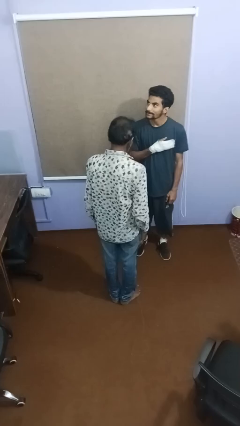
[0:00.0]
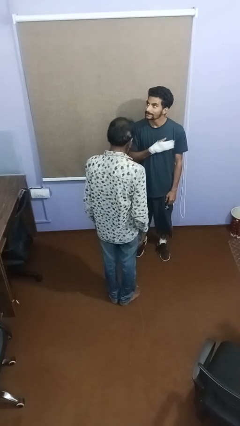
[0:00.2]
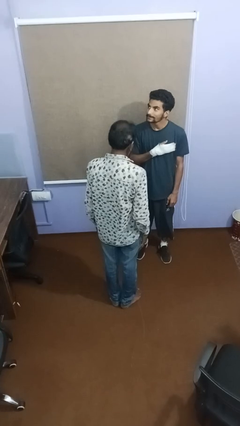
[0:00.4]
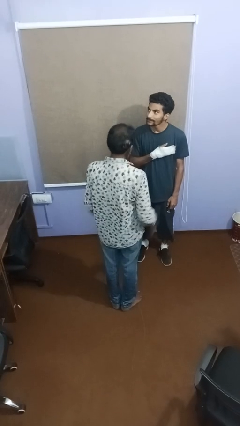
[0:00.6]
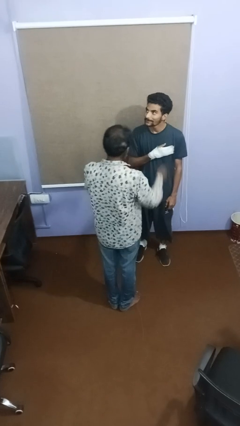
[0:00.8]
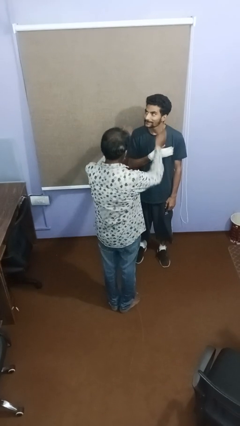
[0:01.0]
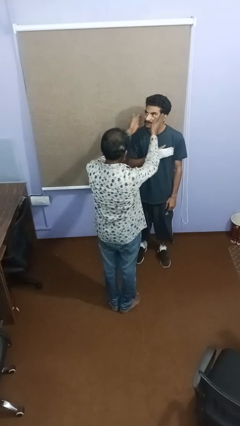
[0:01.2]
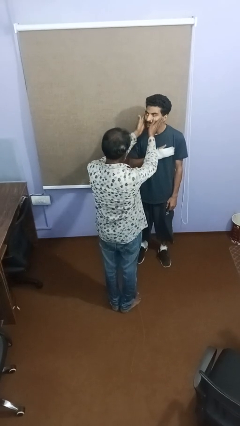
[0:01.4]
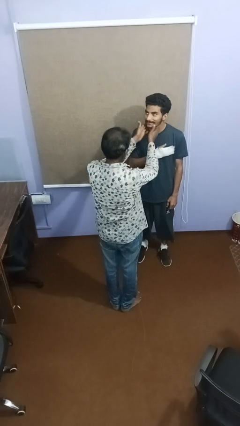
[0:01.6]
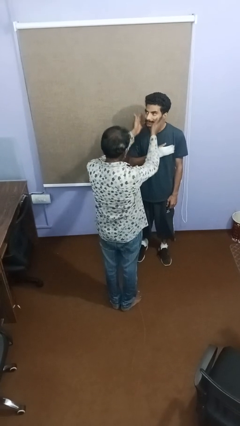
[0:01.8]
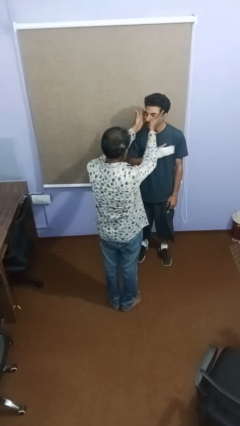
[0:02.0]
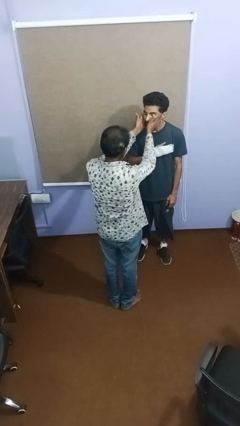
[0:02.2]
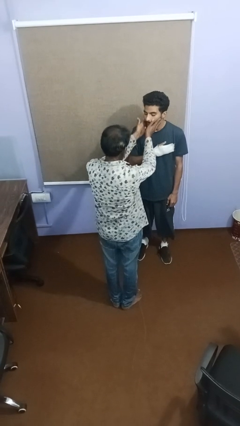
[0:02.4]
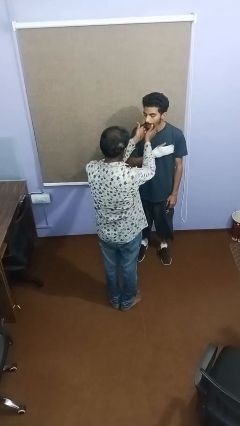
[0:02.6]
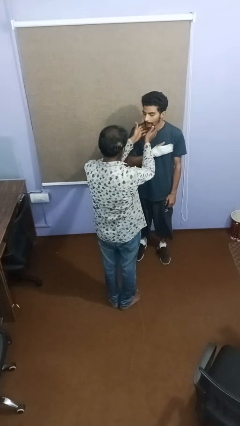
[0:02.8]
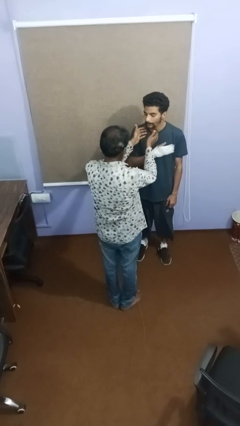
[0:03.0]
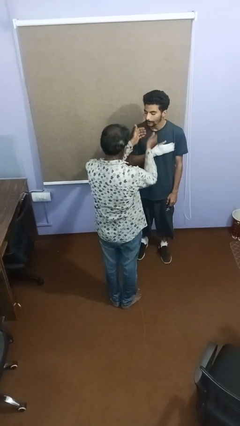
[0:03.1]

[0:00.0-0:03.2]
person touches face of person

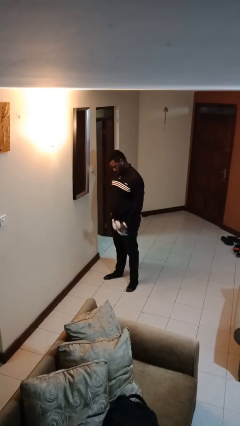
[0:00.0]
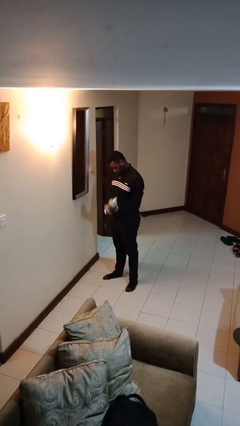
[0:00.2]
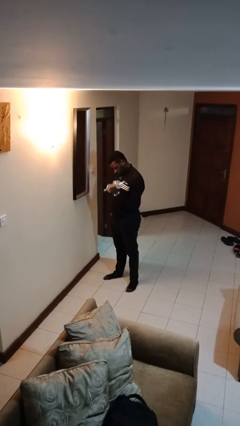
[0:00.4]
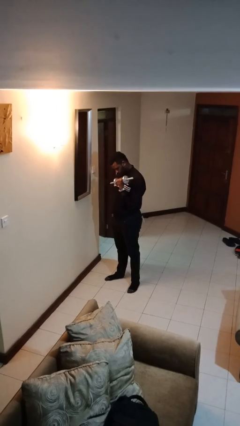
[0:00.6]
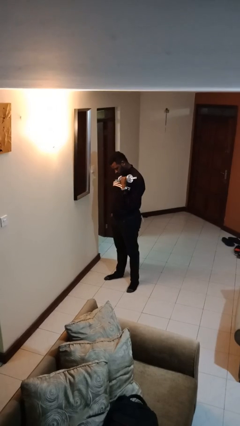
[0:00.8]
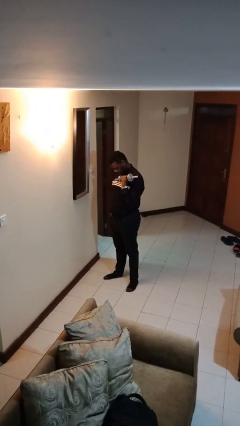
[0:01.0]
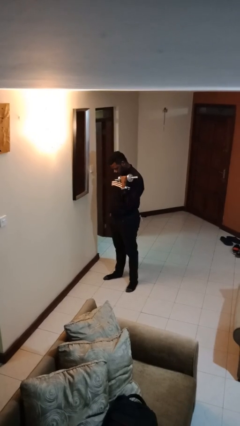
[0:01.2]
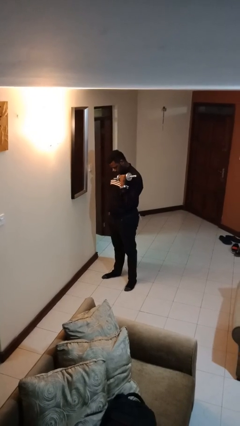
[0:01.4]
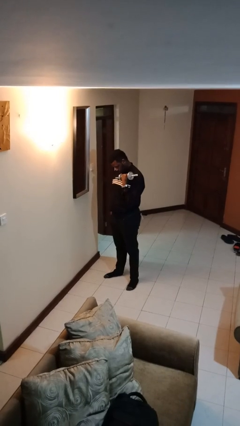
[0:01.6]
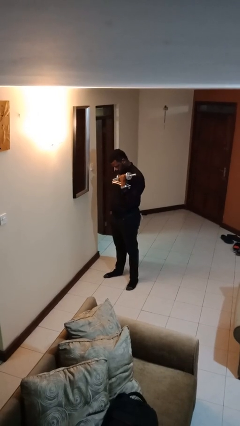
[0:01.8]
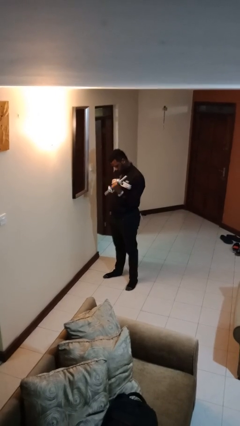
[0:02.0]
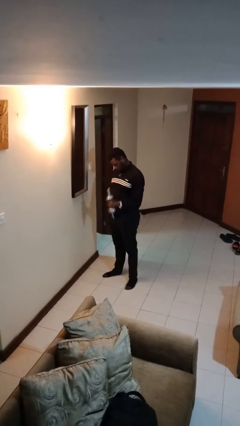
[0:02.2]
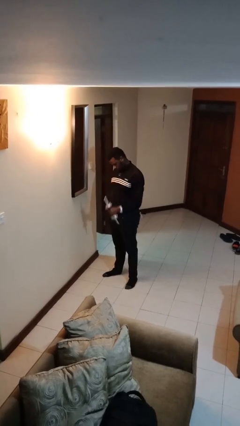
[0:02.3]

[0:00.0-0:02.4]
person lifts dumbbells

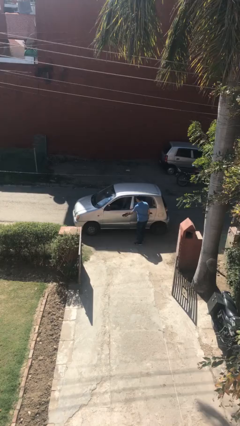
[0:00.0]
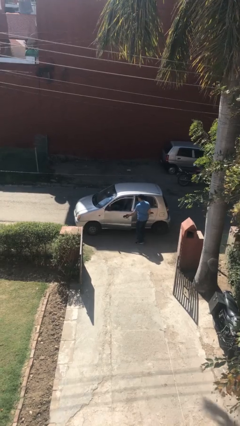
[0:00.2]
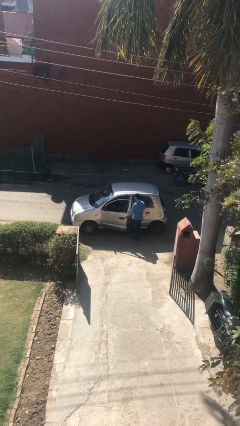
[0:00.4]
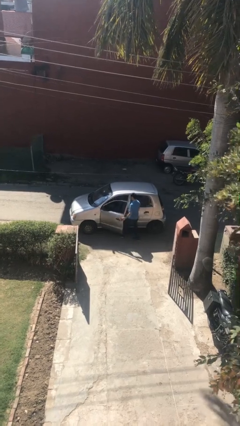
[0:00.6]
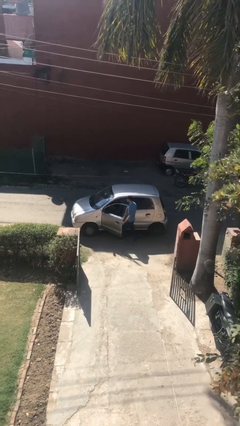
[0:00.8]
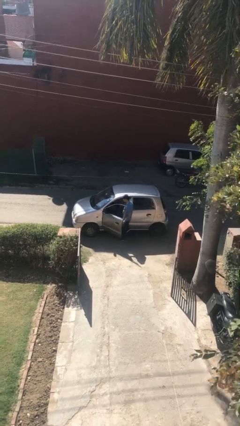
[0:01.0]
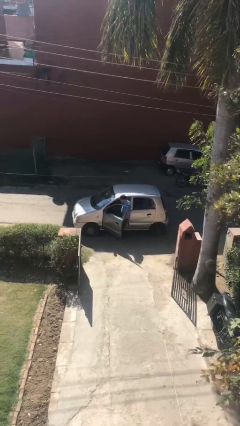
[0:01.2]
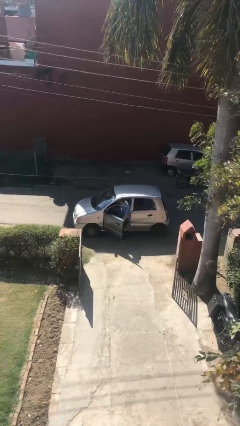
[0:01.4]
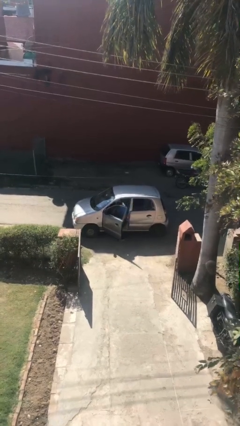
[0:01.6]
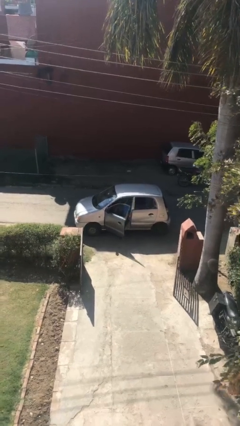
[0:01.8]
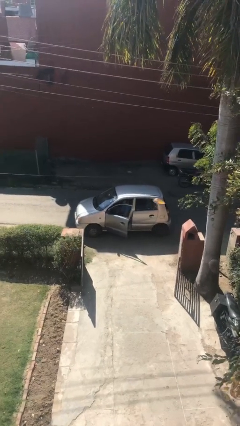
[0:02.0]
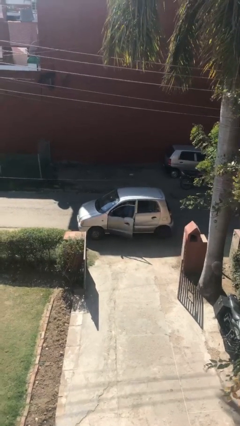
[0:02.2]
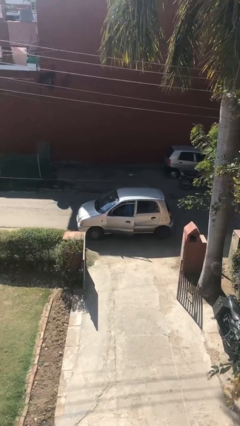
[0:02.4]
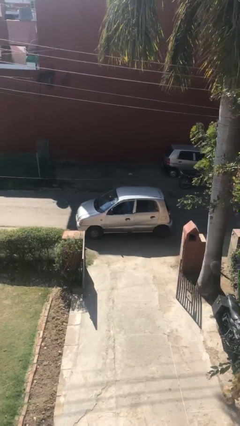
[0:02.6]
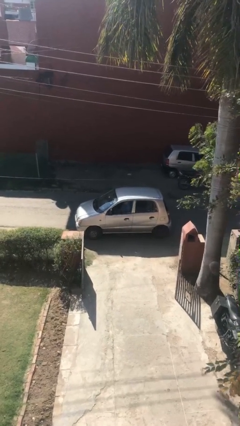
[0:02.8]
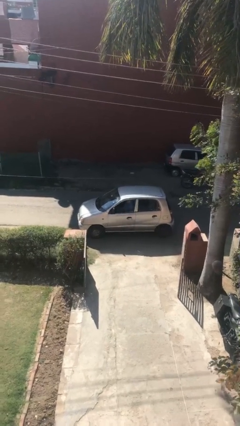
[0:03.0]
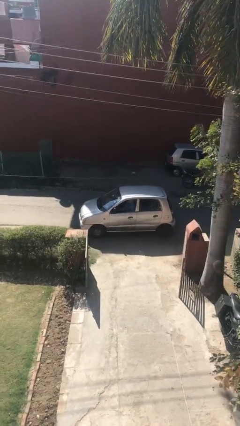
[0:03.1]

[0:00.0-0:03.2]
car picks up person

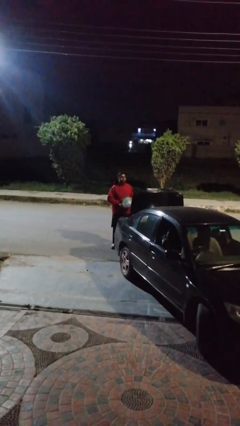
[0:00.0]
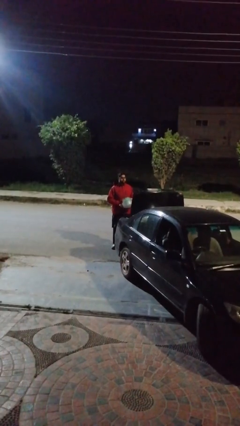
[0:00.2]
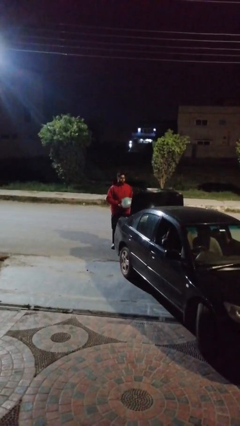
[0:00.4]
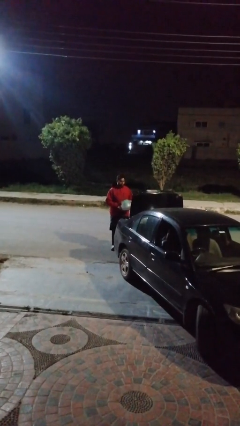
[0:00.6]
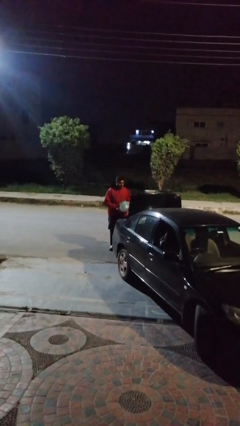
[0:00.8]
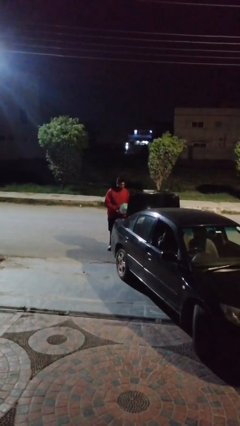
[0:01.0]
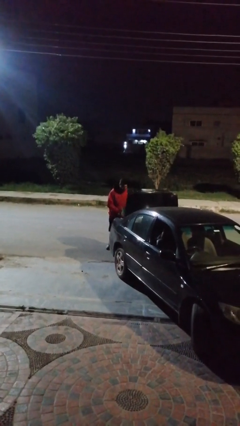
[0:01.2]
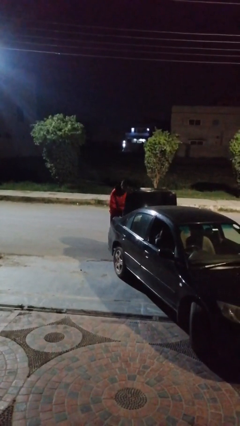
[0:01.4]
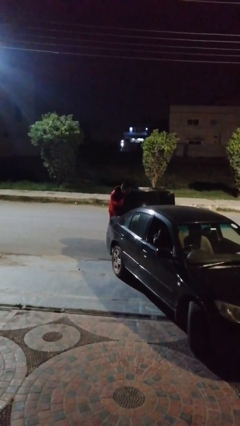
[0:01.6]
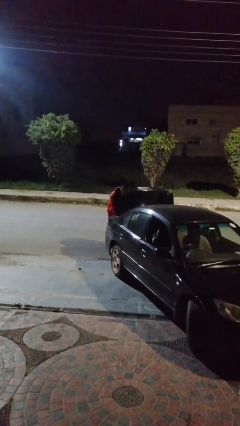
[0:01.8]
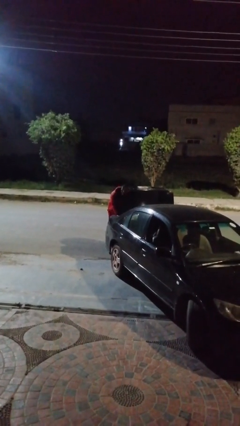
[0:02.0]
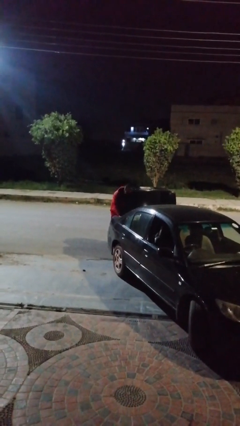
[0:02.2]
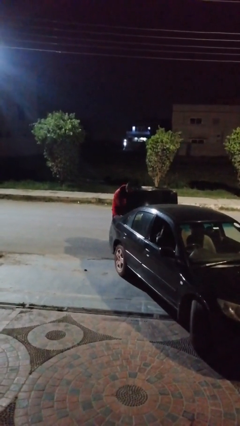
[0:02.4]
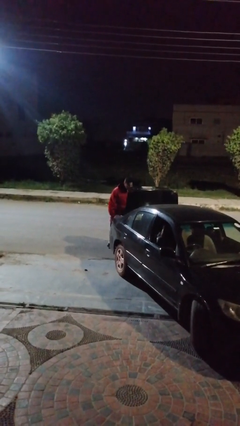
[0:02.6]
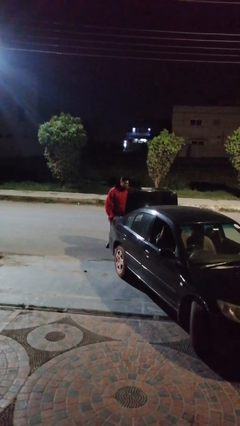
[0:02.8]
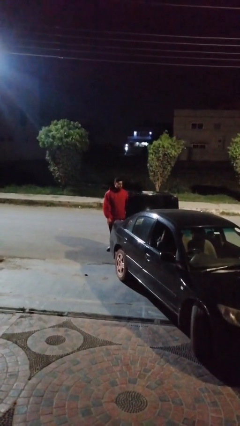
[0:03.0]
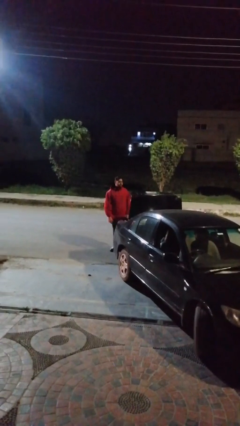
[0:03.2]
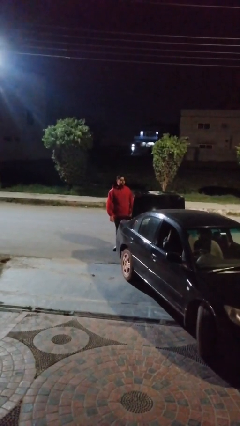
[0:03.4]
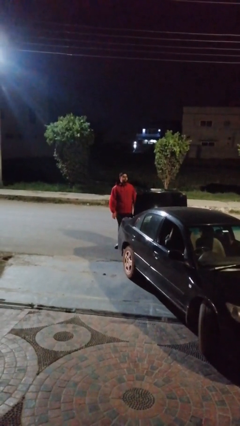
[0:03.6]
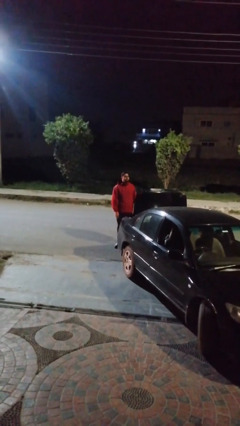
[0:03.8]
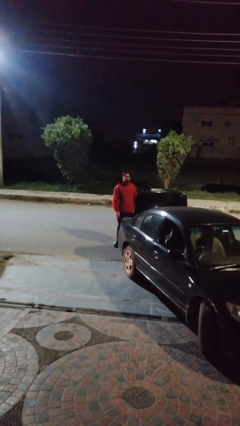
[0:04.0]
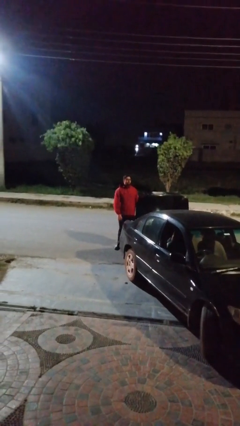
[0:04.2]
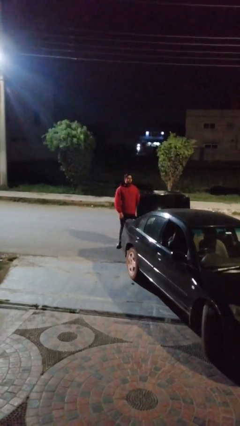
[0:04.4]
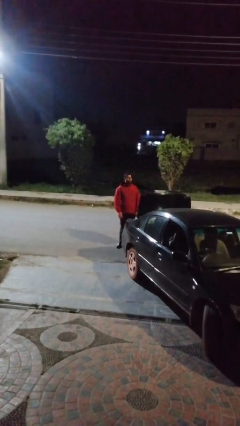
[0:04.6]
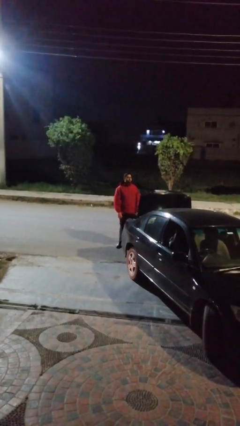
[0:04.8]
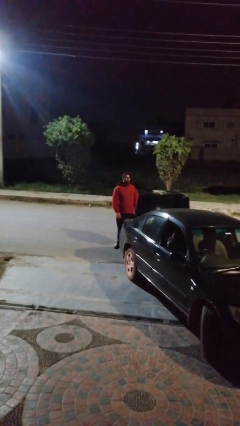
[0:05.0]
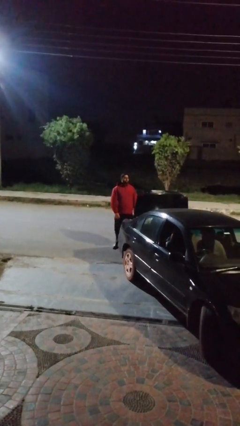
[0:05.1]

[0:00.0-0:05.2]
person loads car

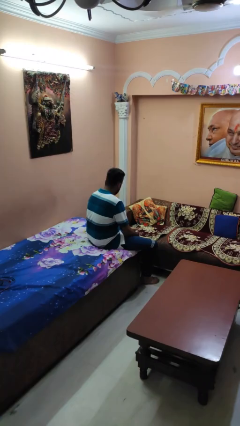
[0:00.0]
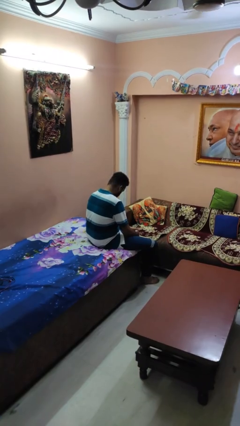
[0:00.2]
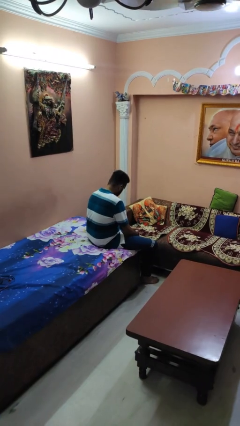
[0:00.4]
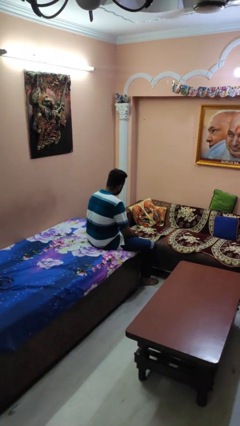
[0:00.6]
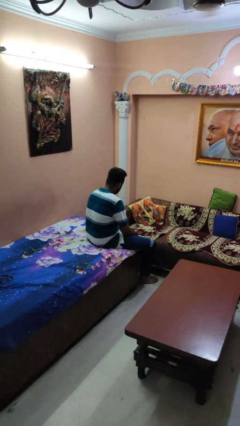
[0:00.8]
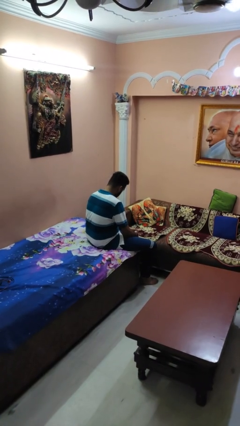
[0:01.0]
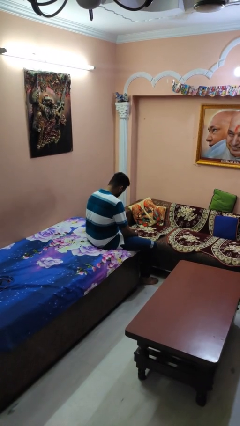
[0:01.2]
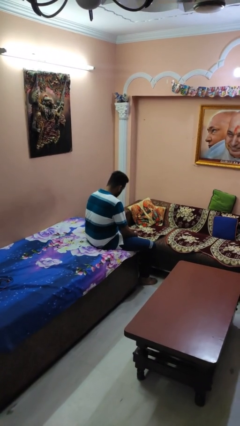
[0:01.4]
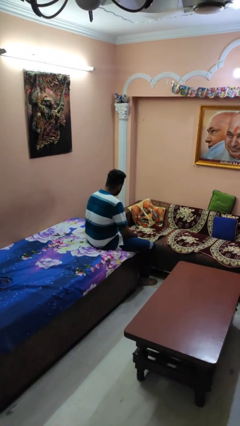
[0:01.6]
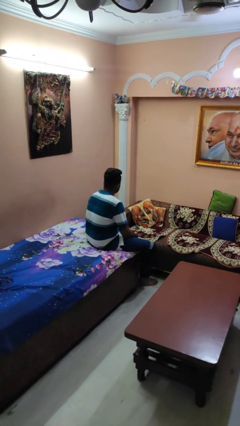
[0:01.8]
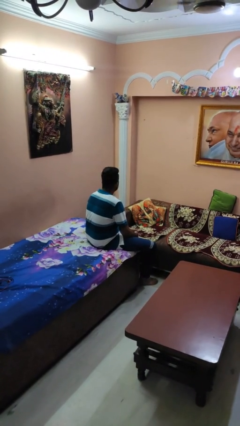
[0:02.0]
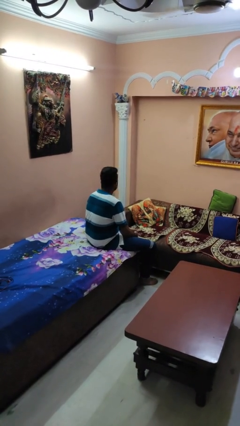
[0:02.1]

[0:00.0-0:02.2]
person nods head

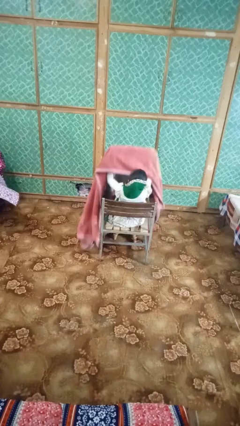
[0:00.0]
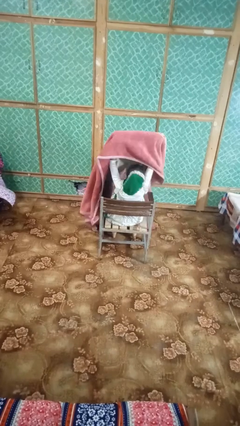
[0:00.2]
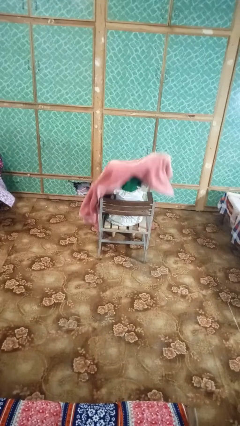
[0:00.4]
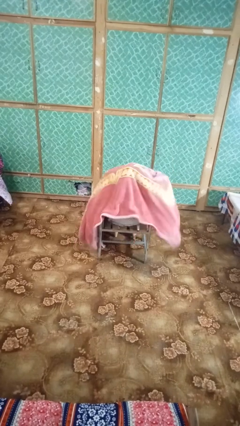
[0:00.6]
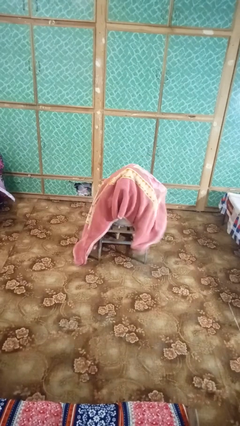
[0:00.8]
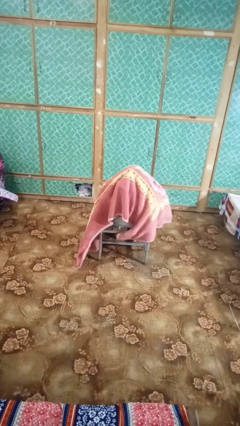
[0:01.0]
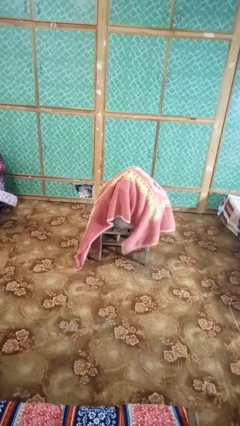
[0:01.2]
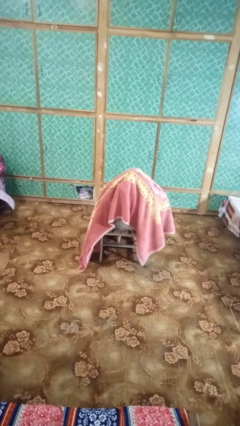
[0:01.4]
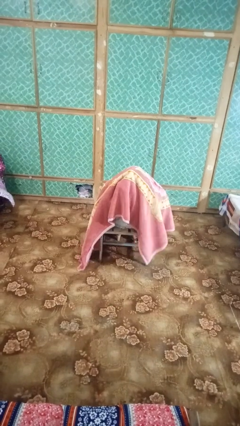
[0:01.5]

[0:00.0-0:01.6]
person covers with blanket
